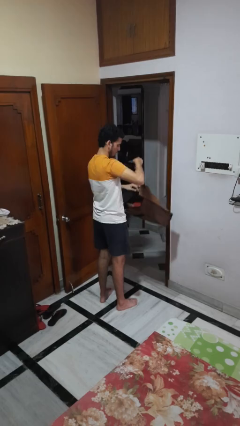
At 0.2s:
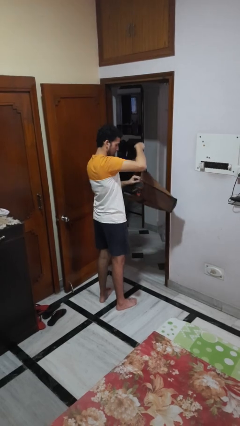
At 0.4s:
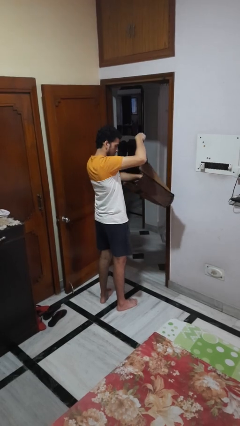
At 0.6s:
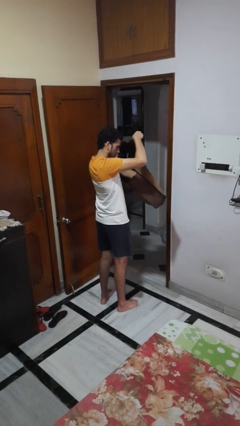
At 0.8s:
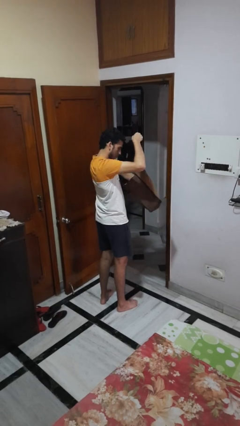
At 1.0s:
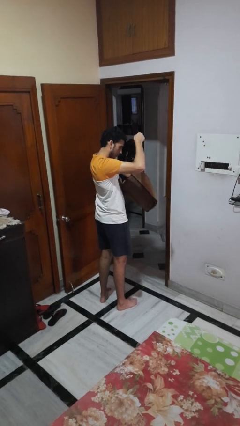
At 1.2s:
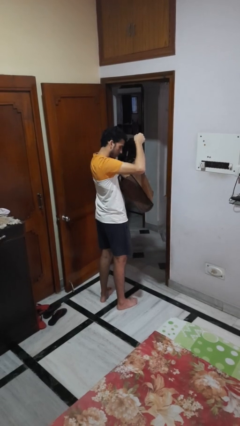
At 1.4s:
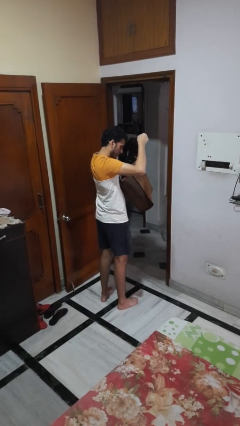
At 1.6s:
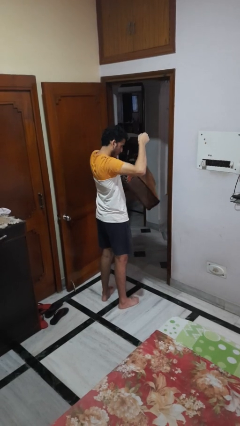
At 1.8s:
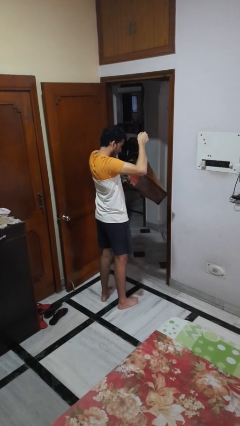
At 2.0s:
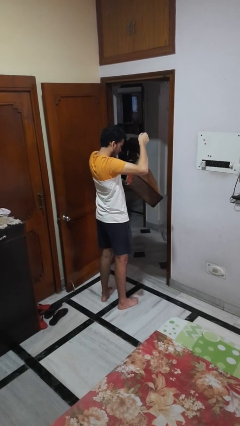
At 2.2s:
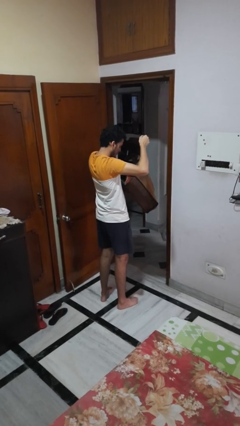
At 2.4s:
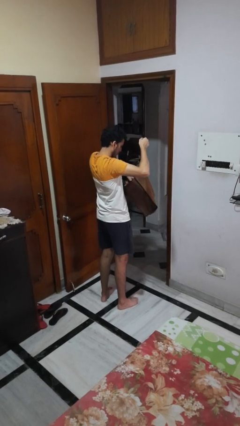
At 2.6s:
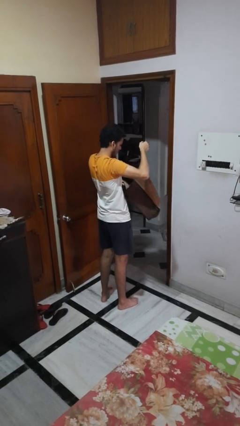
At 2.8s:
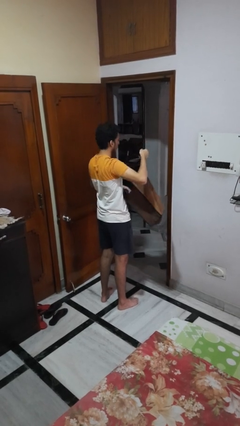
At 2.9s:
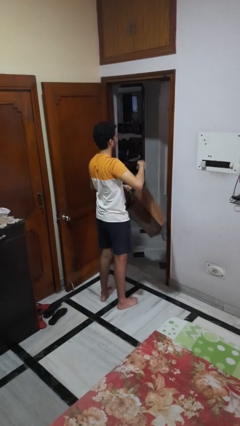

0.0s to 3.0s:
person searches in bag

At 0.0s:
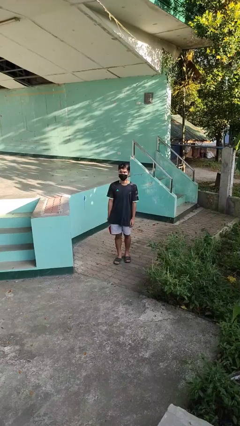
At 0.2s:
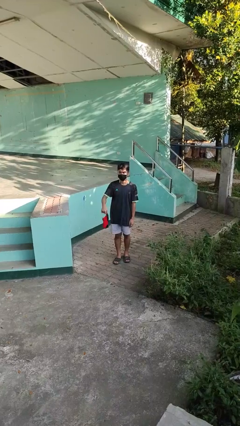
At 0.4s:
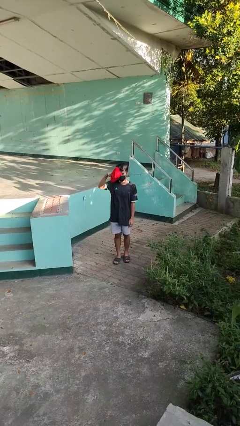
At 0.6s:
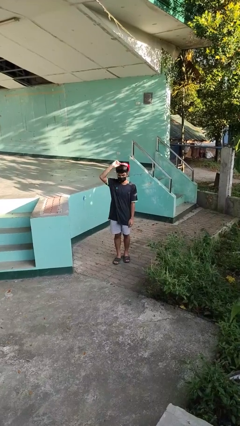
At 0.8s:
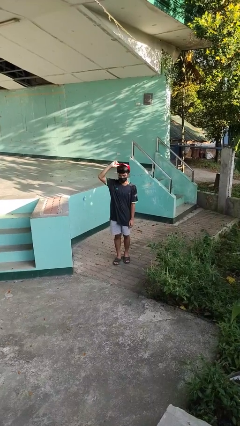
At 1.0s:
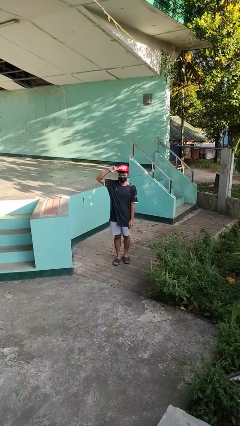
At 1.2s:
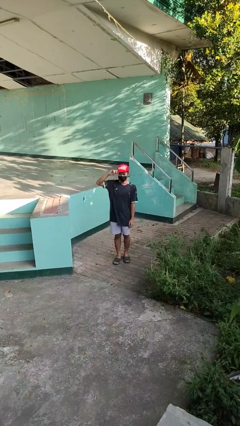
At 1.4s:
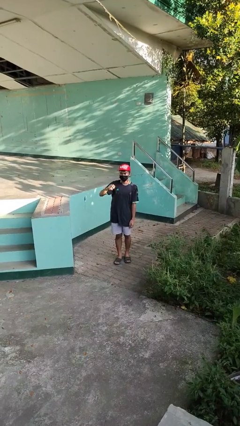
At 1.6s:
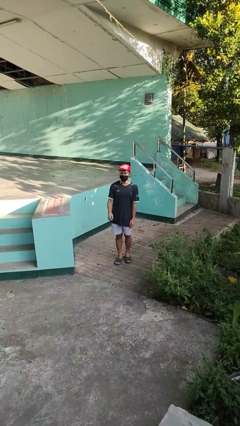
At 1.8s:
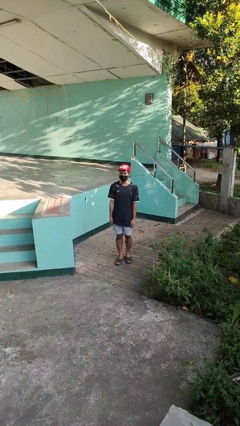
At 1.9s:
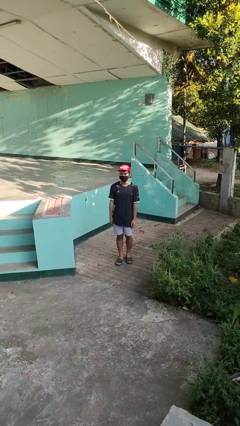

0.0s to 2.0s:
person puts on hat

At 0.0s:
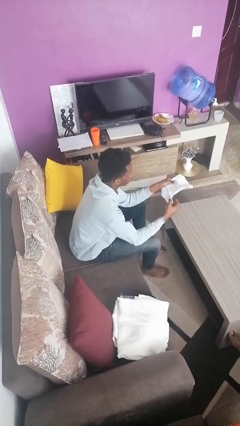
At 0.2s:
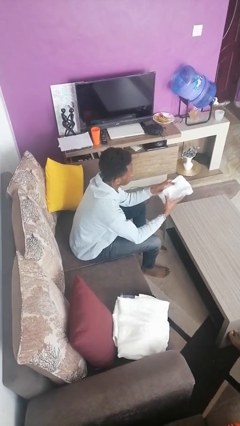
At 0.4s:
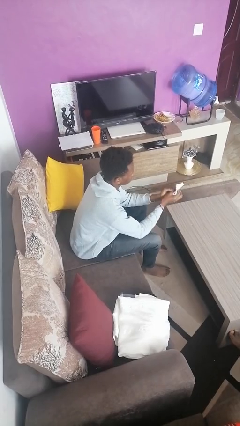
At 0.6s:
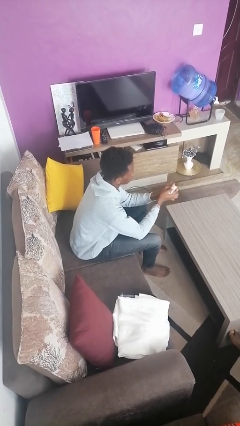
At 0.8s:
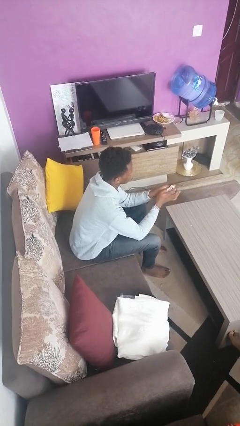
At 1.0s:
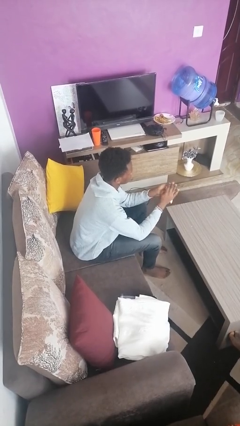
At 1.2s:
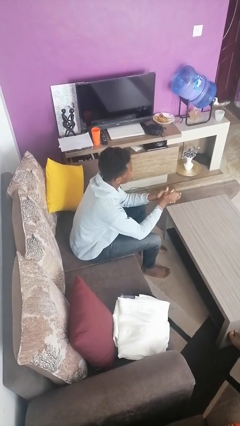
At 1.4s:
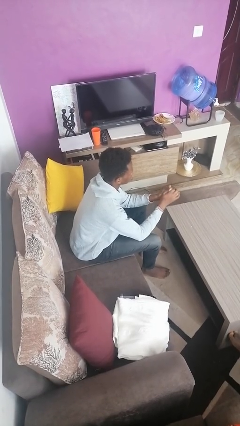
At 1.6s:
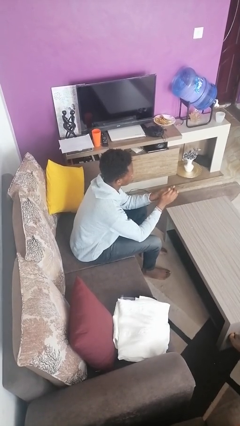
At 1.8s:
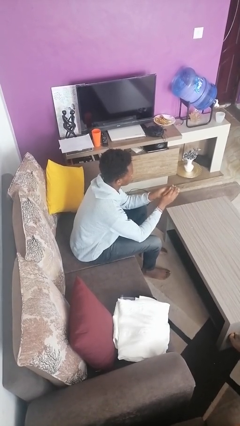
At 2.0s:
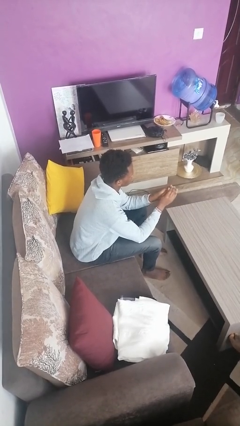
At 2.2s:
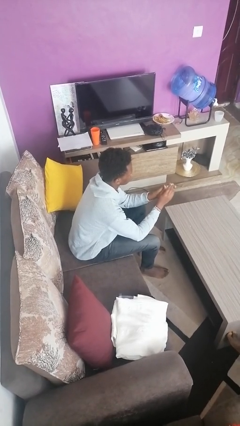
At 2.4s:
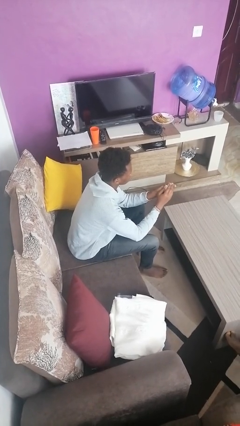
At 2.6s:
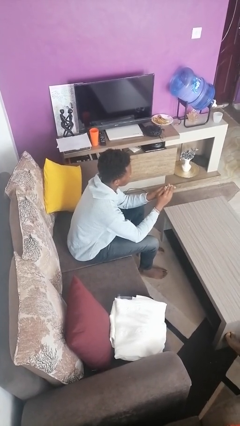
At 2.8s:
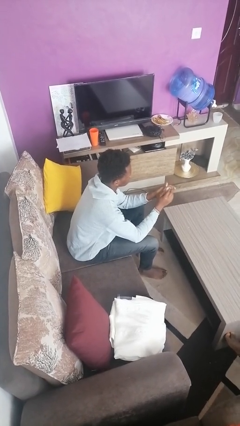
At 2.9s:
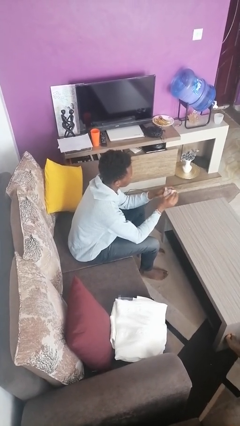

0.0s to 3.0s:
person crumples paper

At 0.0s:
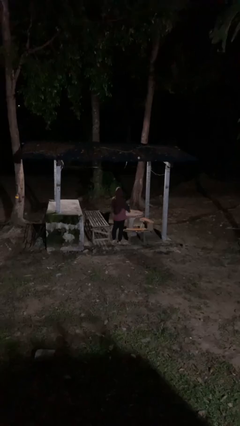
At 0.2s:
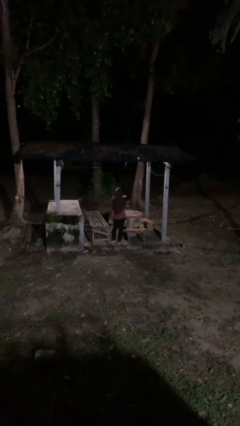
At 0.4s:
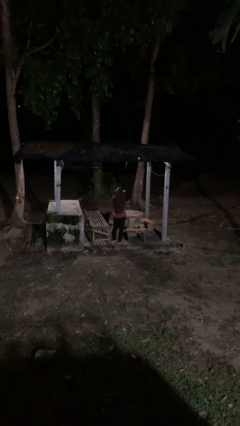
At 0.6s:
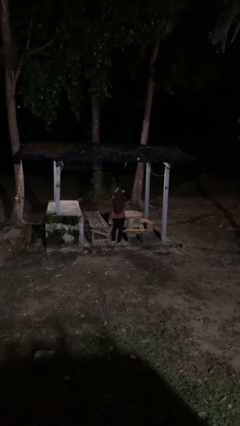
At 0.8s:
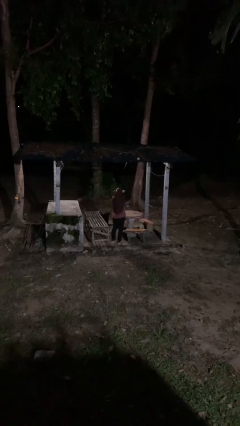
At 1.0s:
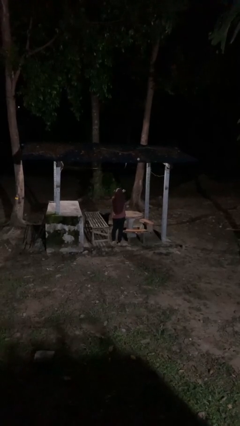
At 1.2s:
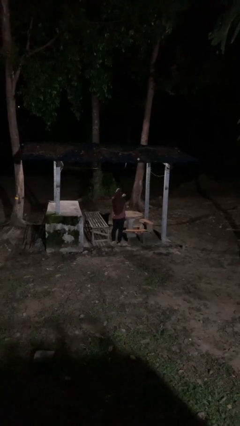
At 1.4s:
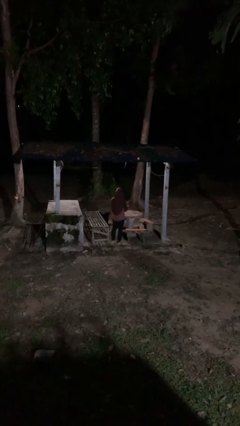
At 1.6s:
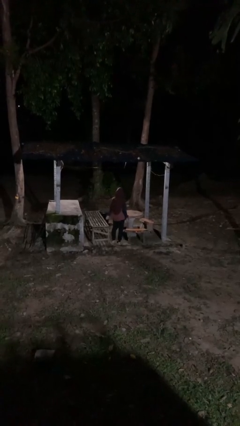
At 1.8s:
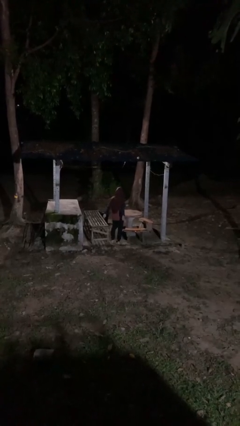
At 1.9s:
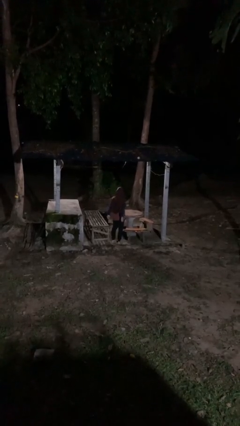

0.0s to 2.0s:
person gestures arms x

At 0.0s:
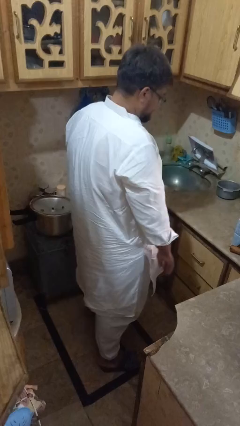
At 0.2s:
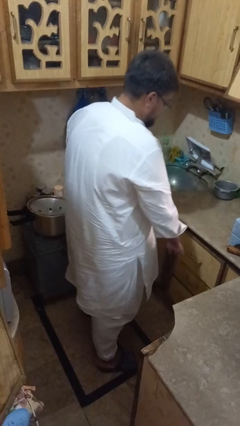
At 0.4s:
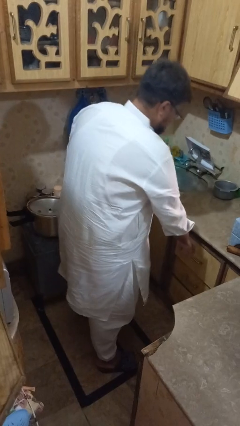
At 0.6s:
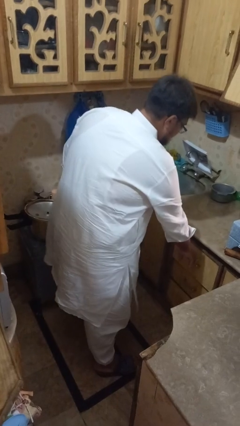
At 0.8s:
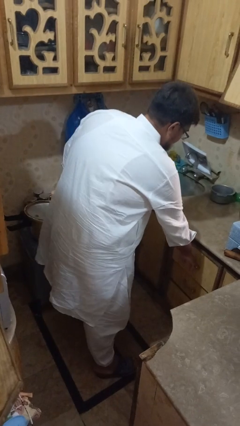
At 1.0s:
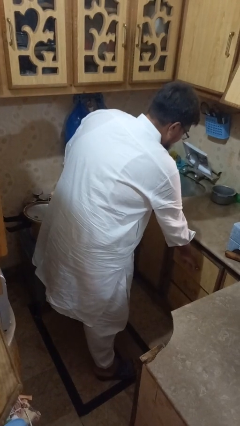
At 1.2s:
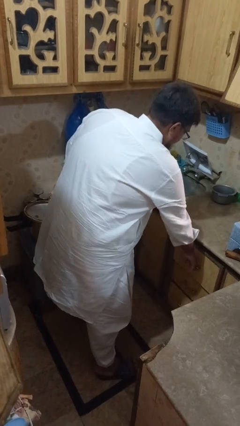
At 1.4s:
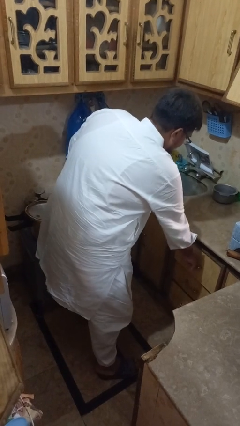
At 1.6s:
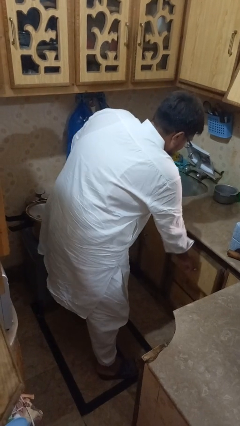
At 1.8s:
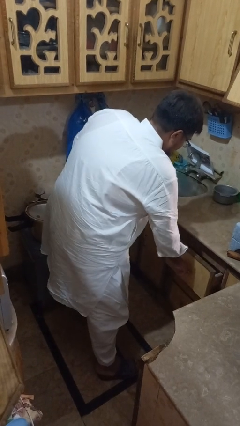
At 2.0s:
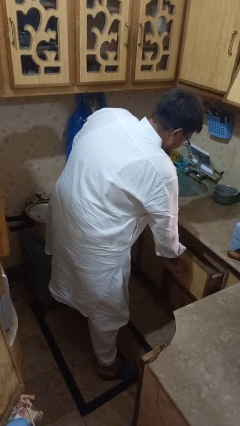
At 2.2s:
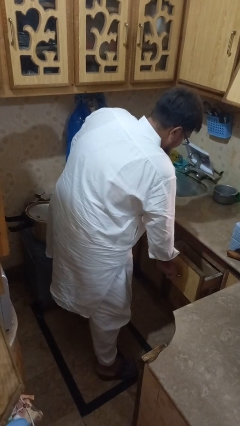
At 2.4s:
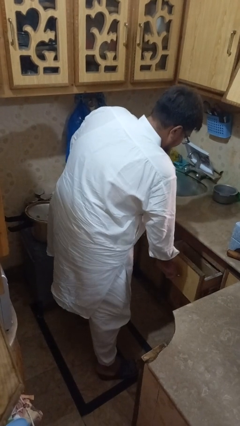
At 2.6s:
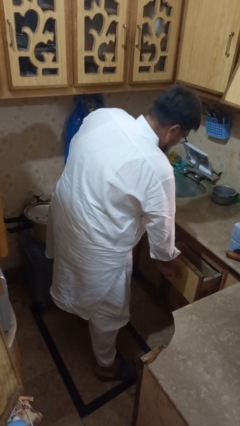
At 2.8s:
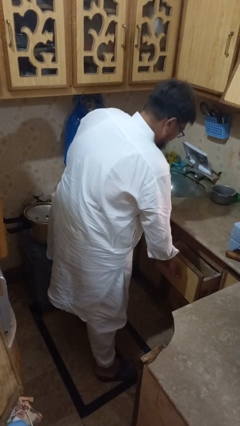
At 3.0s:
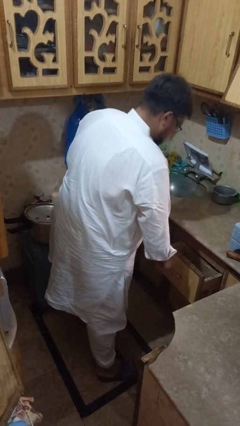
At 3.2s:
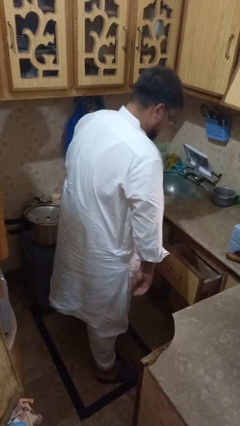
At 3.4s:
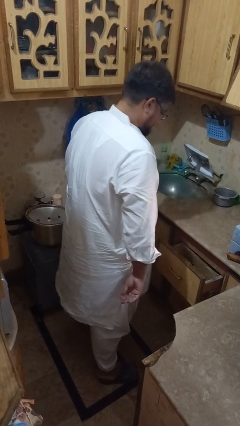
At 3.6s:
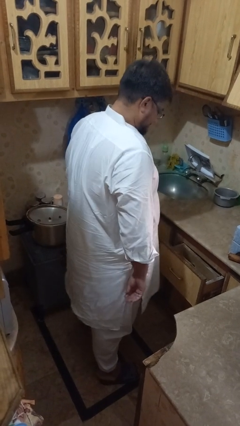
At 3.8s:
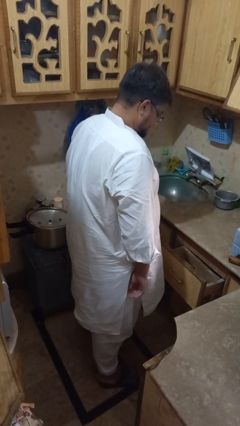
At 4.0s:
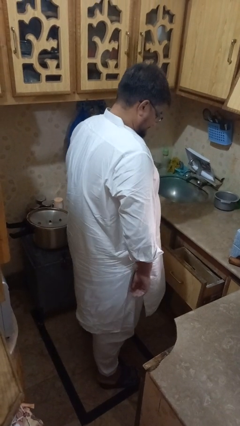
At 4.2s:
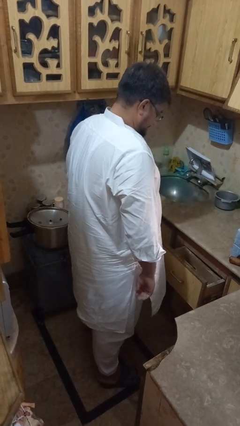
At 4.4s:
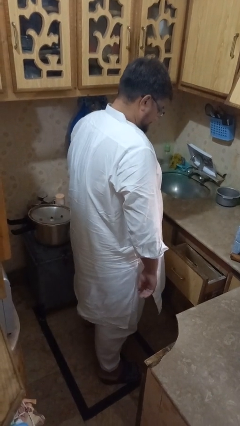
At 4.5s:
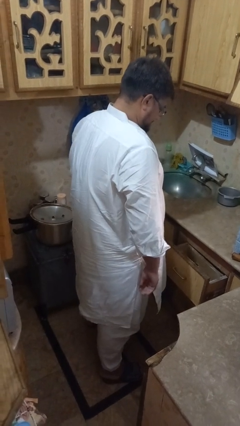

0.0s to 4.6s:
person opens kitchen drawer

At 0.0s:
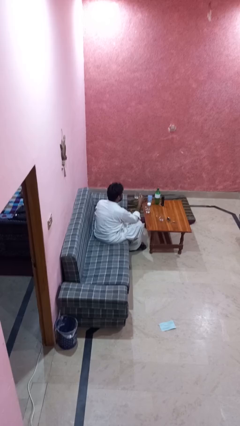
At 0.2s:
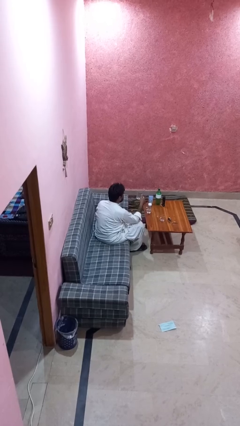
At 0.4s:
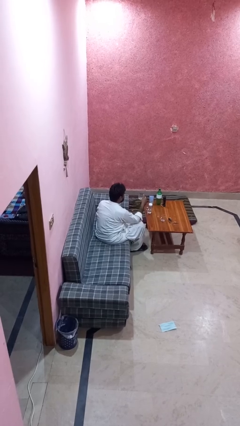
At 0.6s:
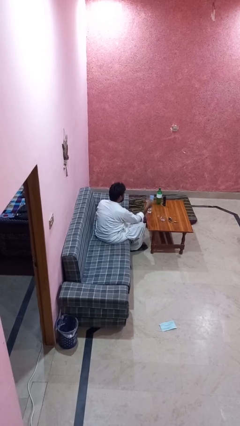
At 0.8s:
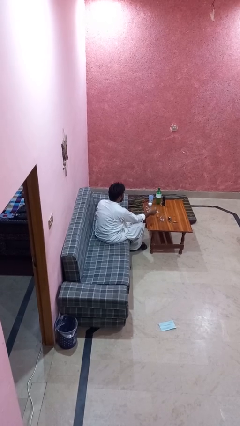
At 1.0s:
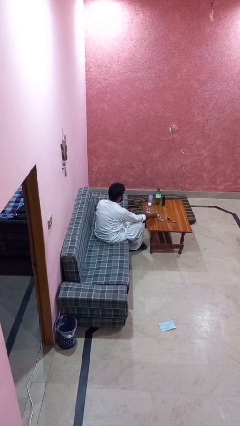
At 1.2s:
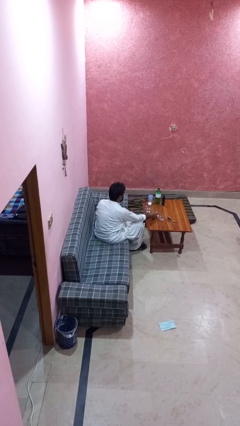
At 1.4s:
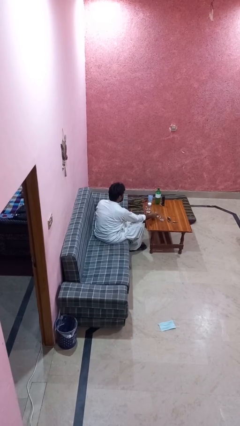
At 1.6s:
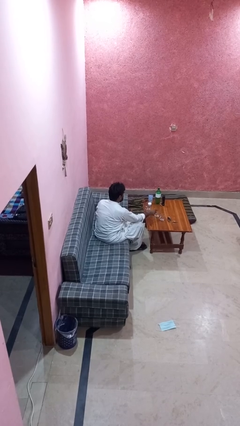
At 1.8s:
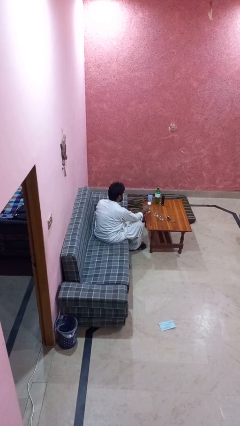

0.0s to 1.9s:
person puts down object on table

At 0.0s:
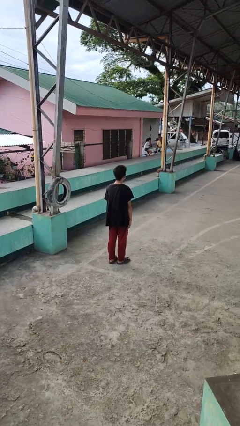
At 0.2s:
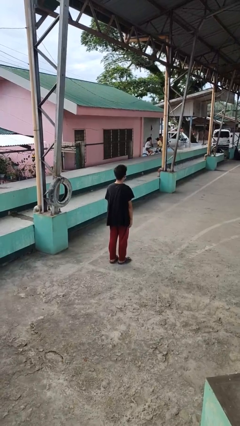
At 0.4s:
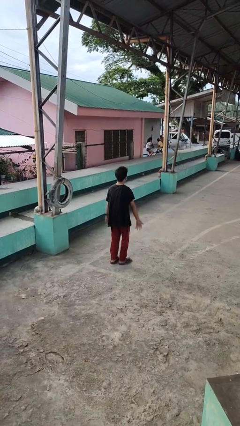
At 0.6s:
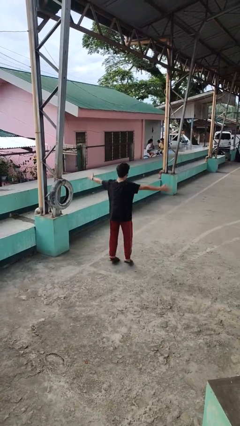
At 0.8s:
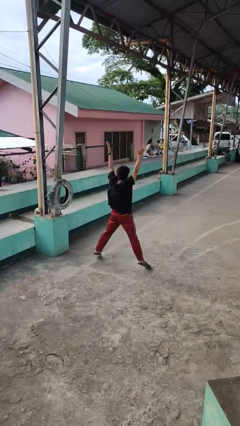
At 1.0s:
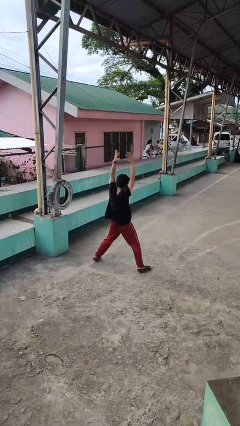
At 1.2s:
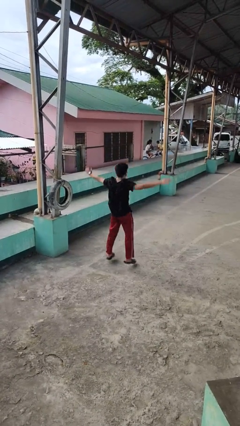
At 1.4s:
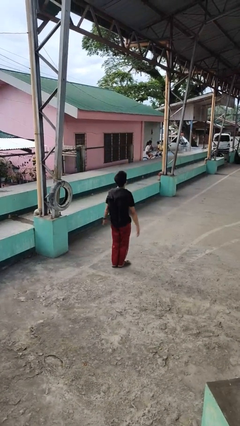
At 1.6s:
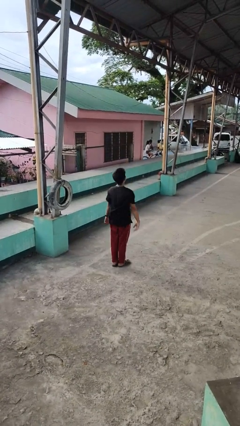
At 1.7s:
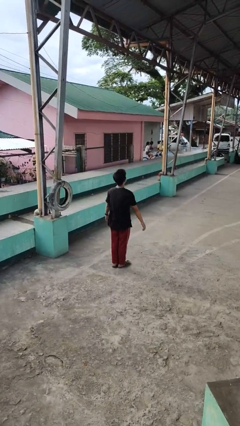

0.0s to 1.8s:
person exercises with jumping jacks
